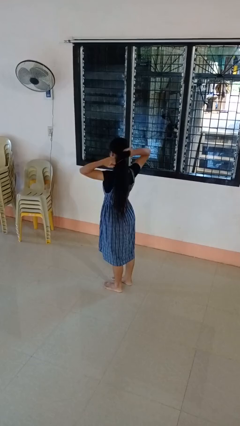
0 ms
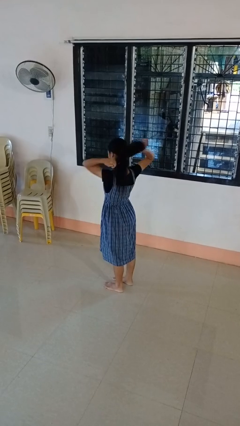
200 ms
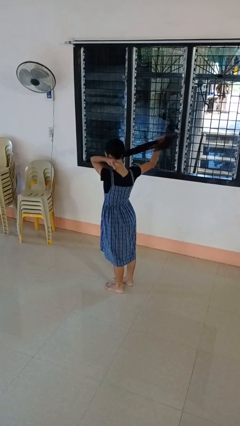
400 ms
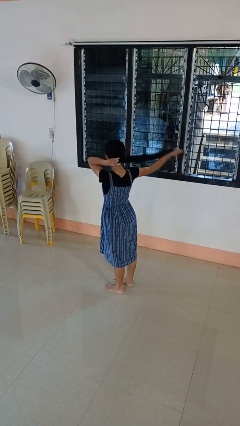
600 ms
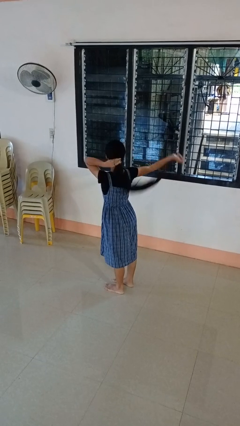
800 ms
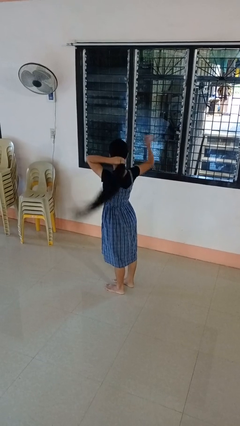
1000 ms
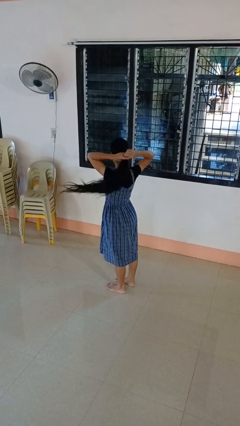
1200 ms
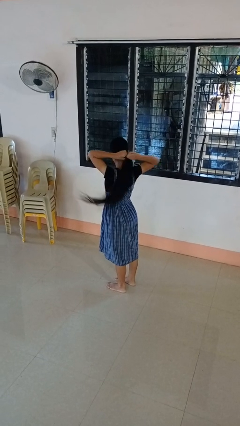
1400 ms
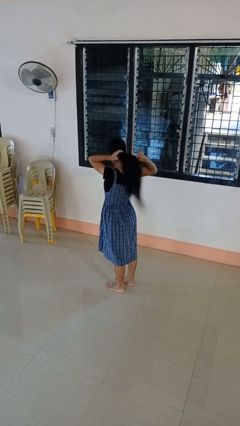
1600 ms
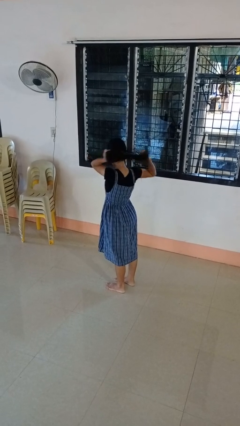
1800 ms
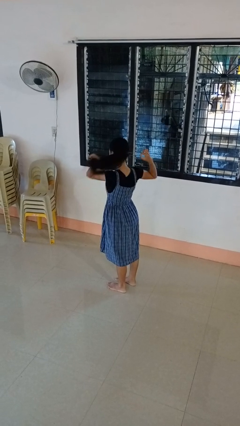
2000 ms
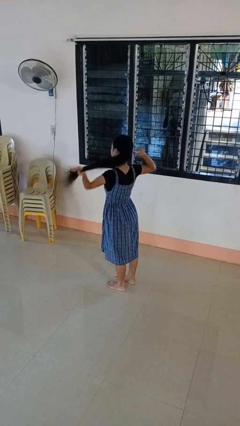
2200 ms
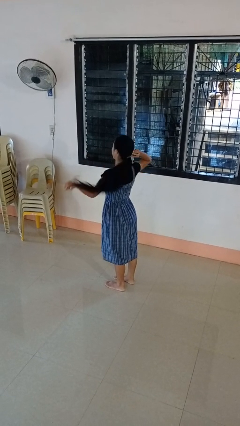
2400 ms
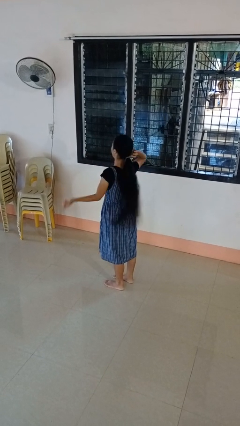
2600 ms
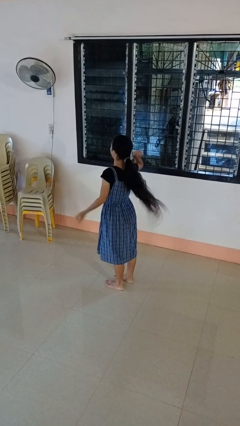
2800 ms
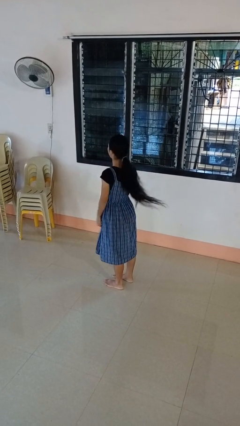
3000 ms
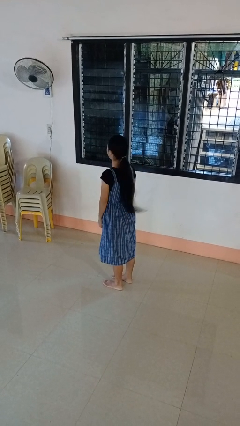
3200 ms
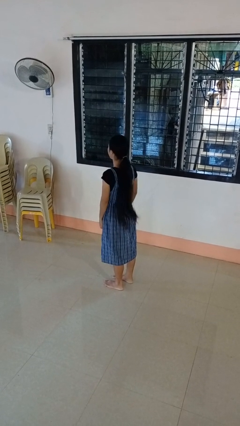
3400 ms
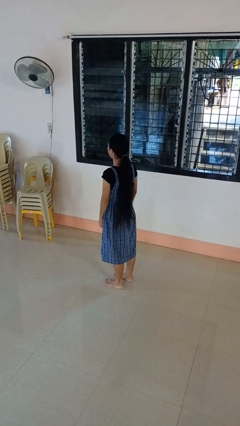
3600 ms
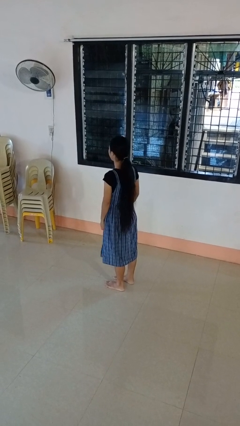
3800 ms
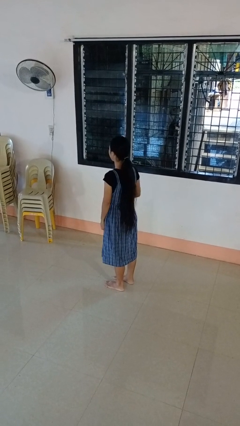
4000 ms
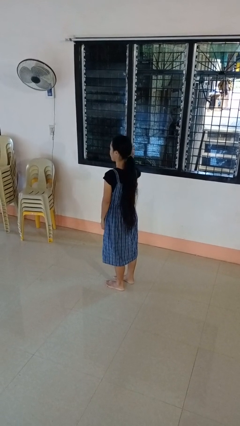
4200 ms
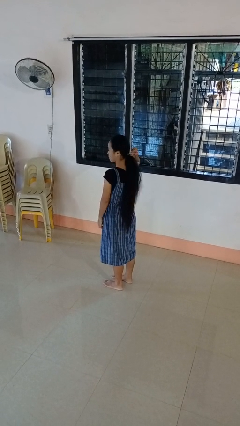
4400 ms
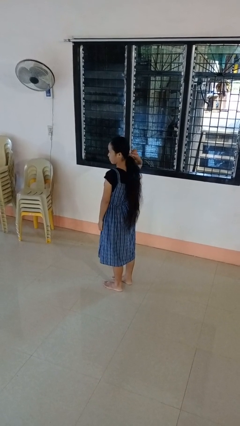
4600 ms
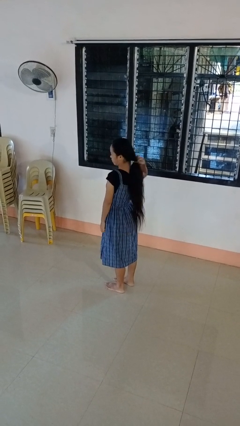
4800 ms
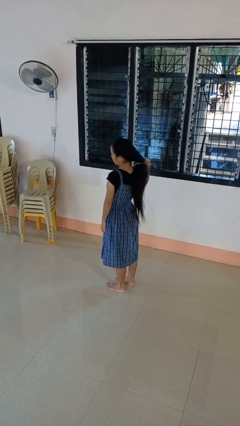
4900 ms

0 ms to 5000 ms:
person puts hair in ponytail

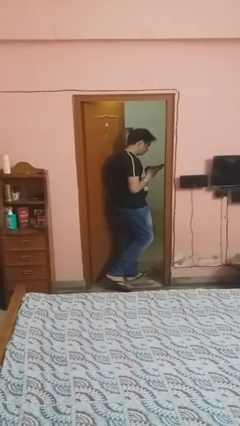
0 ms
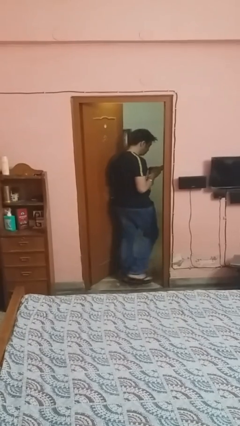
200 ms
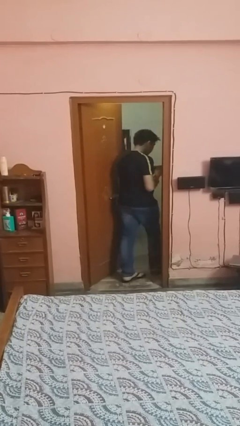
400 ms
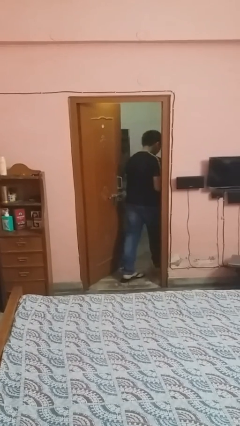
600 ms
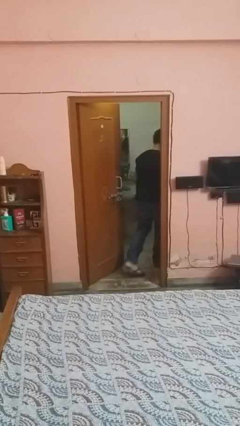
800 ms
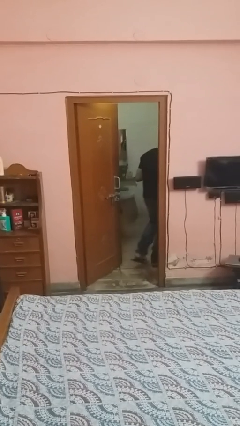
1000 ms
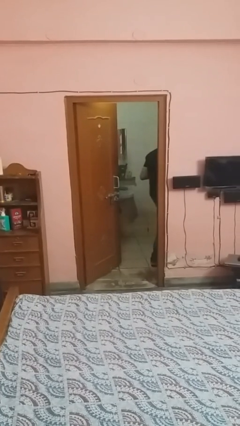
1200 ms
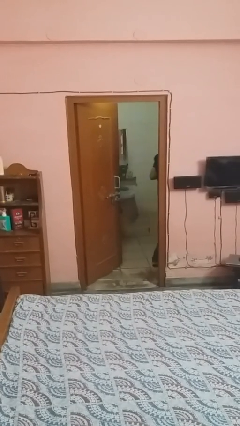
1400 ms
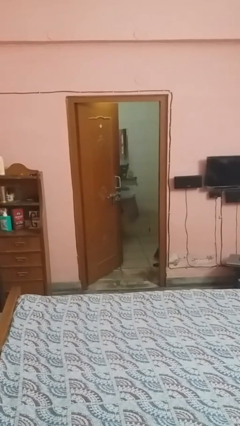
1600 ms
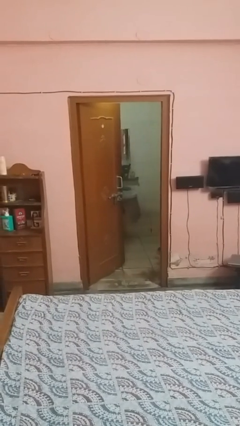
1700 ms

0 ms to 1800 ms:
person exits scene through structure

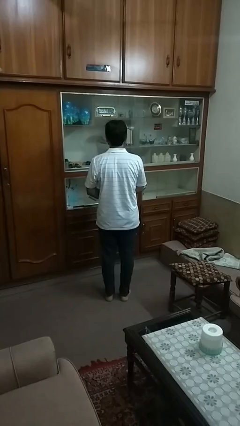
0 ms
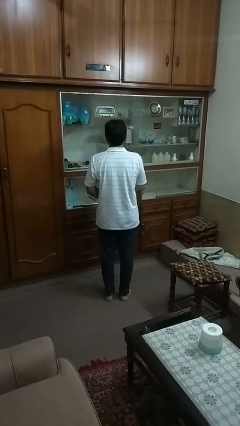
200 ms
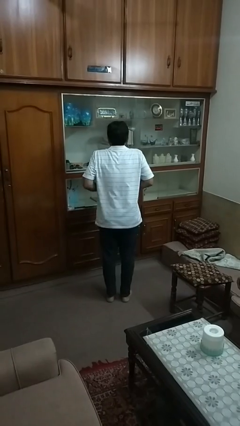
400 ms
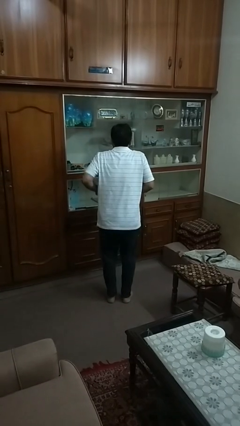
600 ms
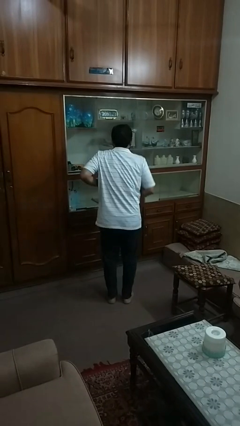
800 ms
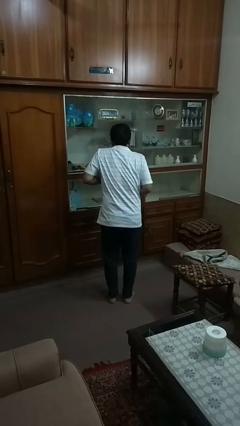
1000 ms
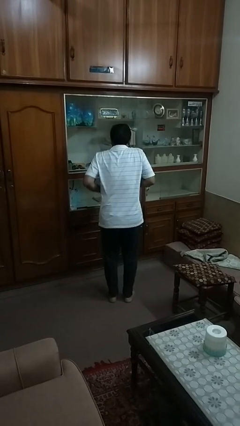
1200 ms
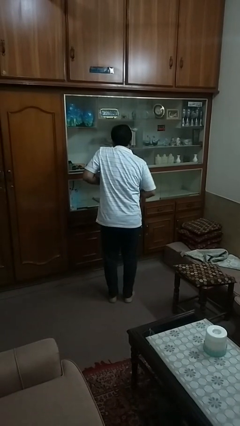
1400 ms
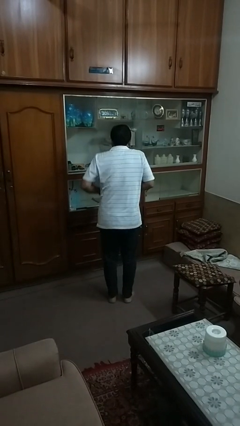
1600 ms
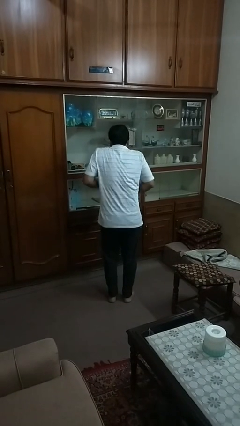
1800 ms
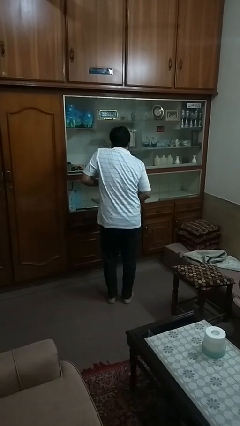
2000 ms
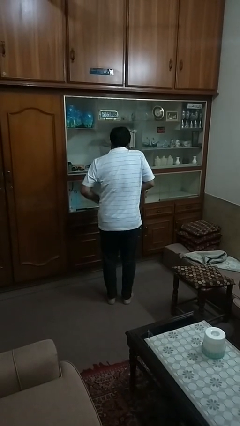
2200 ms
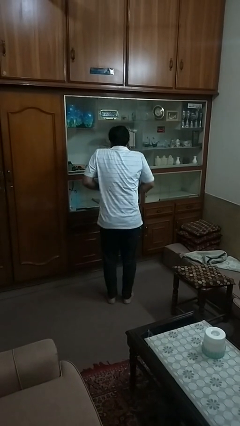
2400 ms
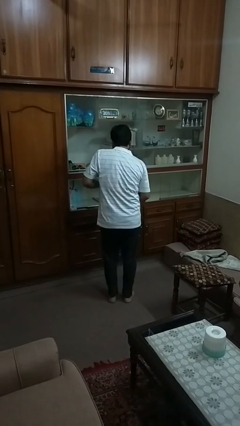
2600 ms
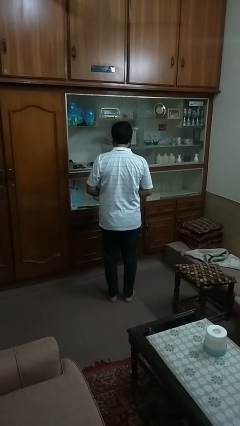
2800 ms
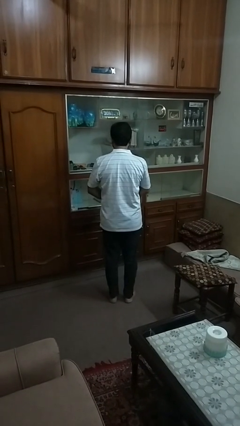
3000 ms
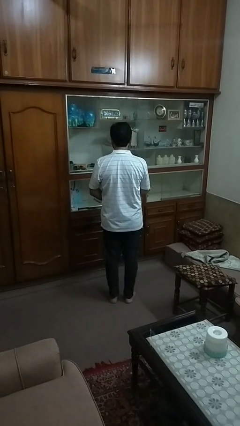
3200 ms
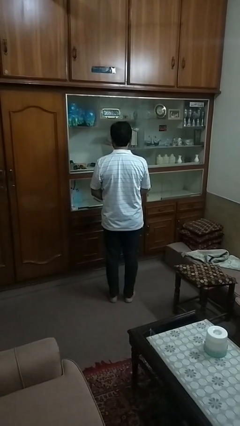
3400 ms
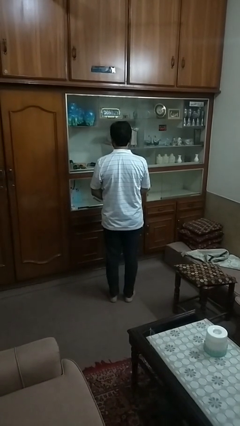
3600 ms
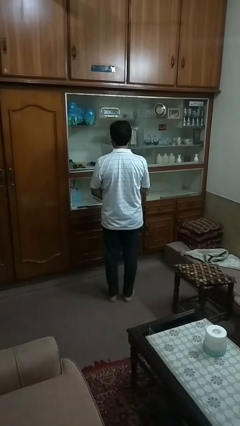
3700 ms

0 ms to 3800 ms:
person dances in place

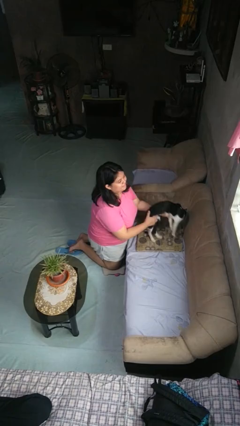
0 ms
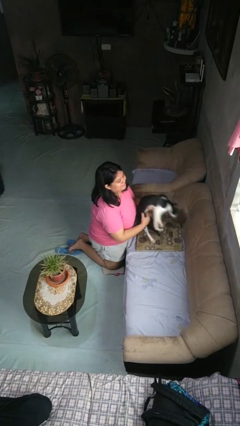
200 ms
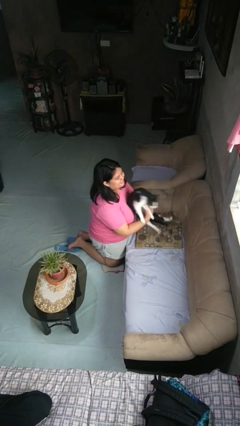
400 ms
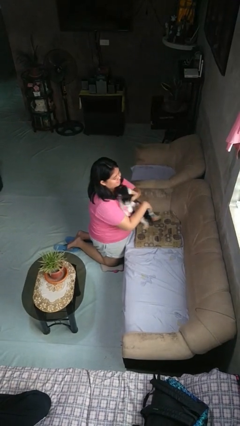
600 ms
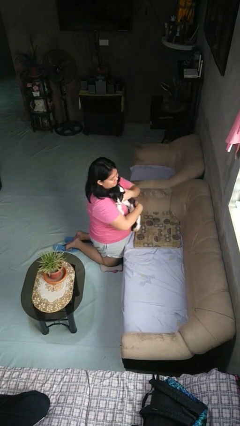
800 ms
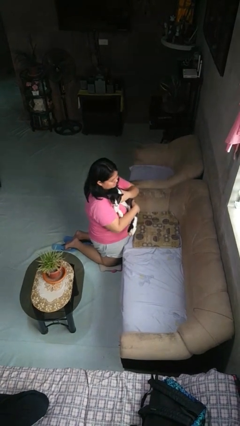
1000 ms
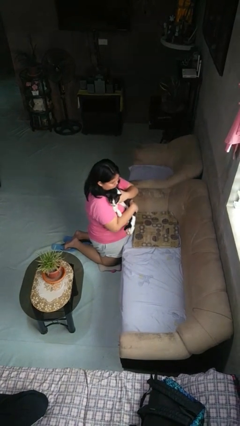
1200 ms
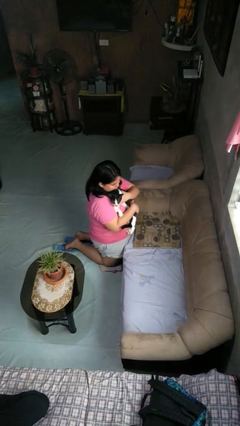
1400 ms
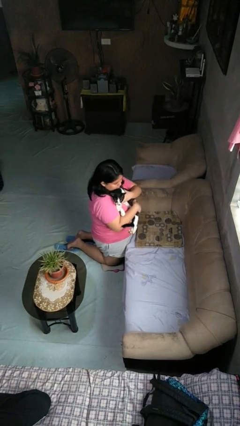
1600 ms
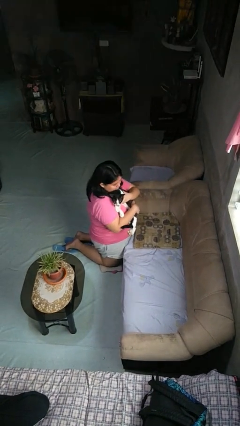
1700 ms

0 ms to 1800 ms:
person hugs cat

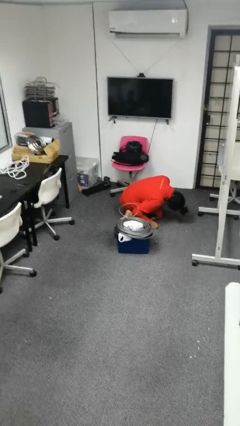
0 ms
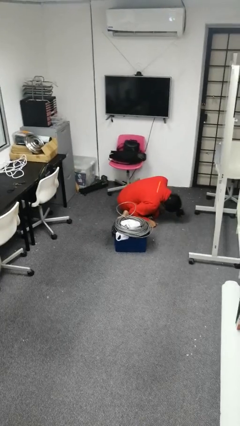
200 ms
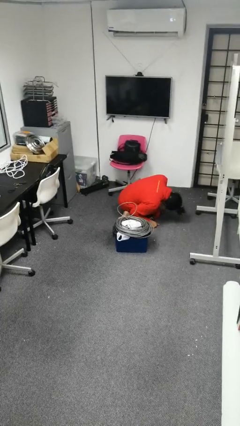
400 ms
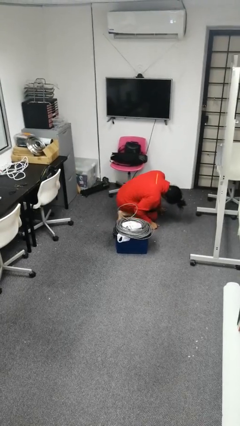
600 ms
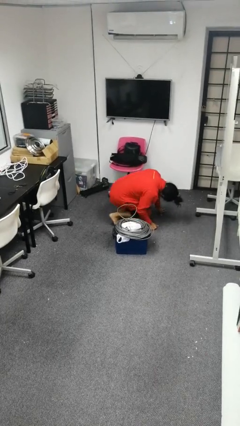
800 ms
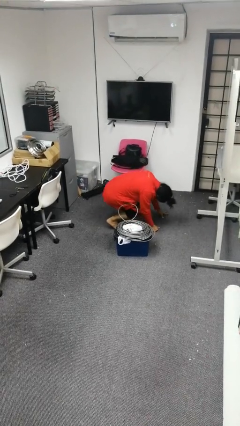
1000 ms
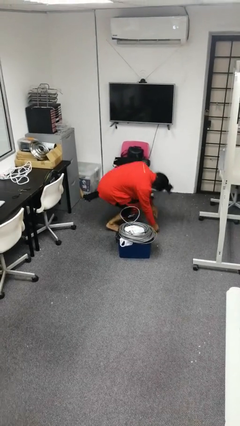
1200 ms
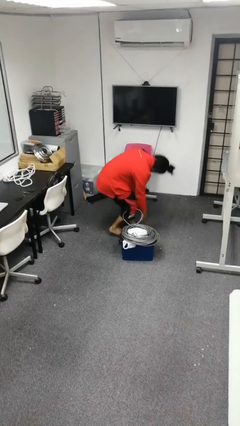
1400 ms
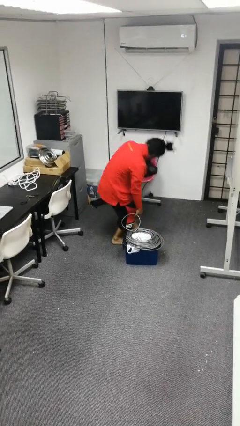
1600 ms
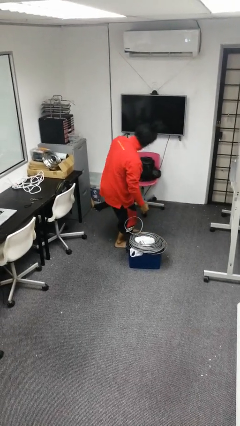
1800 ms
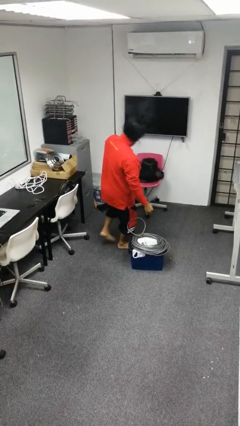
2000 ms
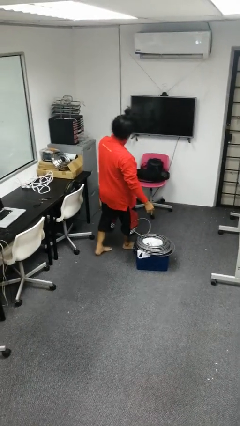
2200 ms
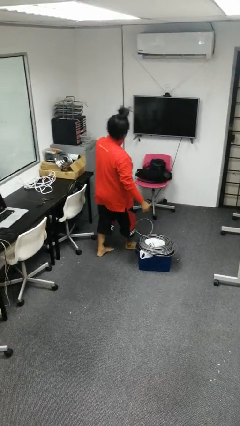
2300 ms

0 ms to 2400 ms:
person stands up from floor

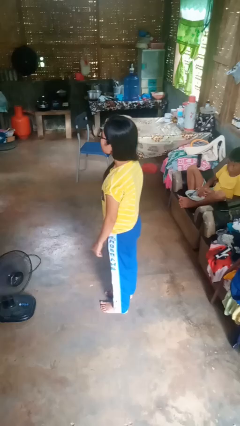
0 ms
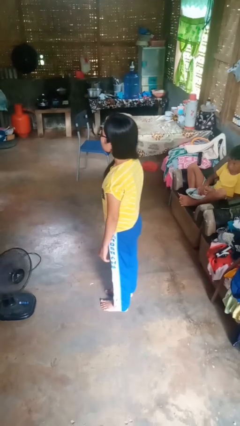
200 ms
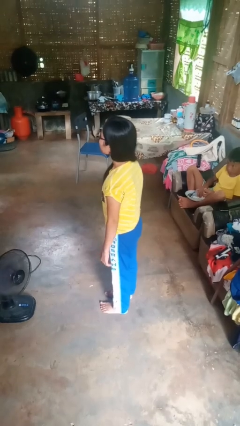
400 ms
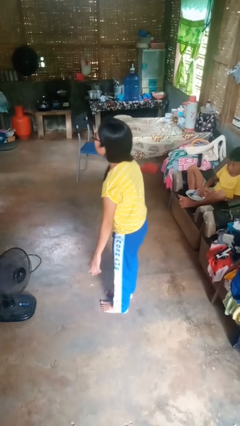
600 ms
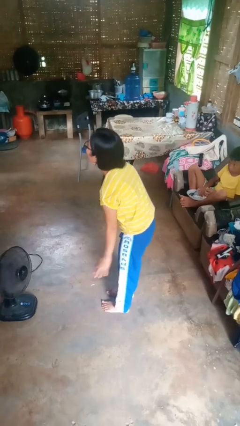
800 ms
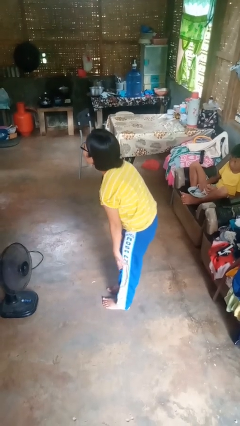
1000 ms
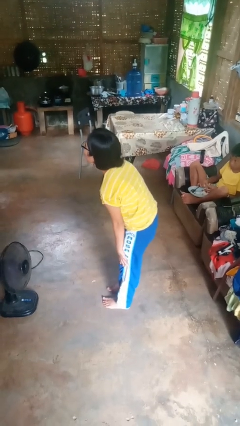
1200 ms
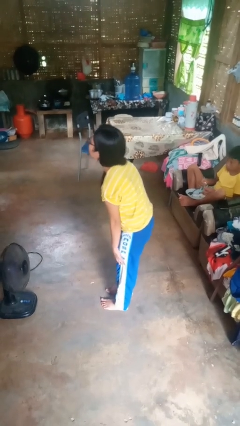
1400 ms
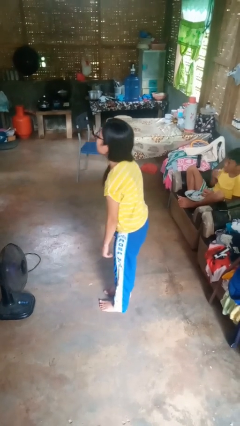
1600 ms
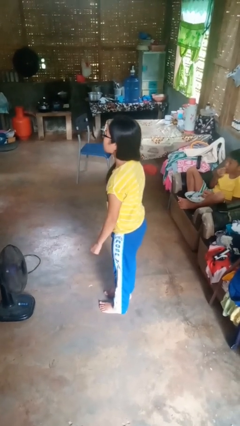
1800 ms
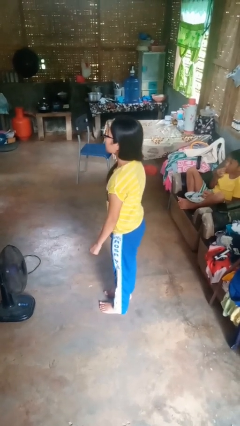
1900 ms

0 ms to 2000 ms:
person slaps hands on thighs

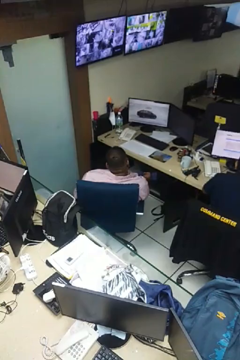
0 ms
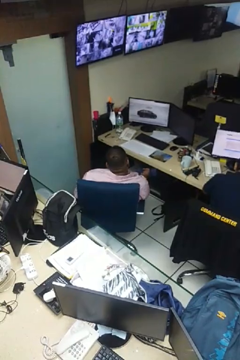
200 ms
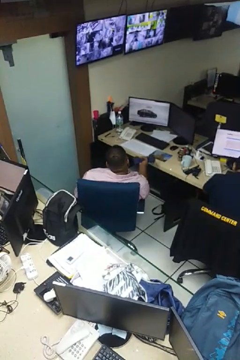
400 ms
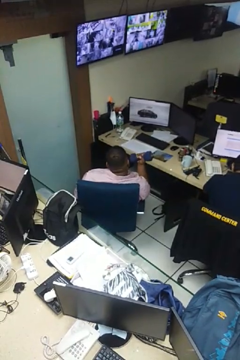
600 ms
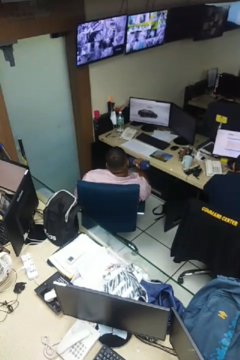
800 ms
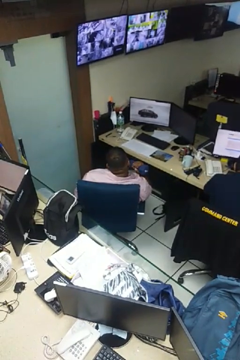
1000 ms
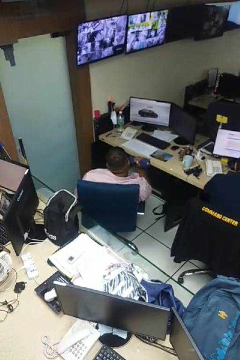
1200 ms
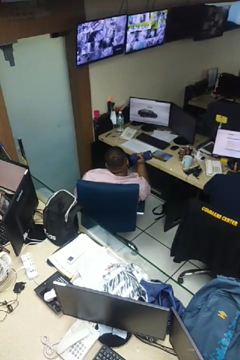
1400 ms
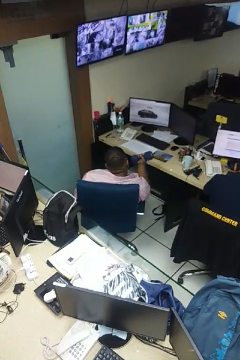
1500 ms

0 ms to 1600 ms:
person lifts dumbbells
